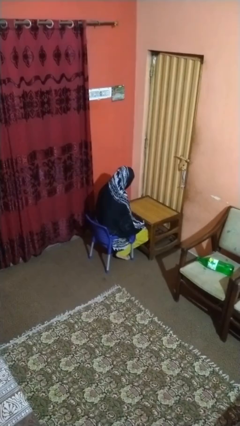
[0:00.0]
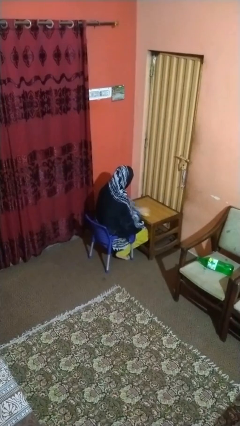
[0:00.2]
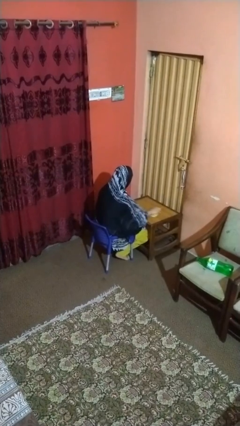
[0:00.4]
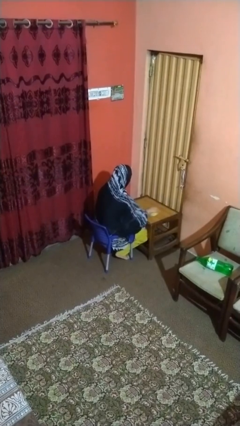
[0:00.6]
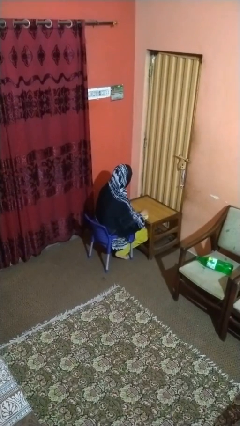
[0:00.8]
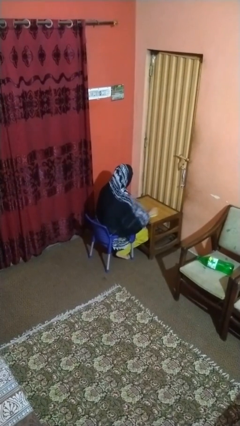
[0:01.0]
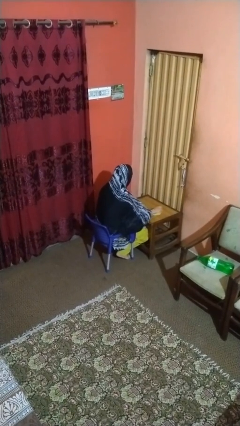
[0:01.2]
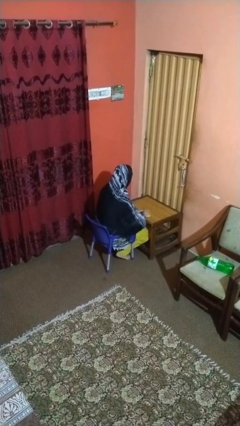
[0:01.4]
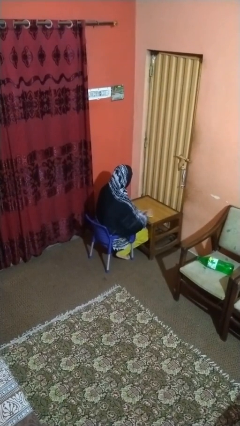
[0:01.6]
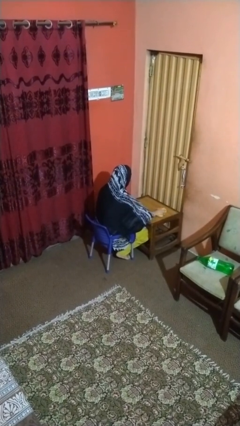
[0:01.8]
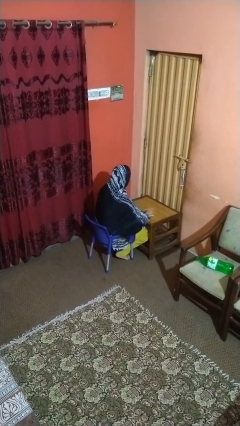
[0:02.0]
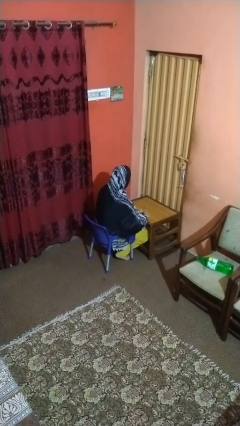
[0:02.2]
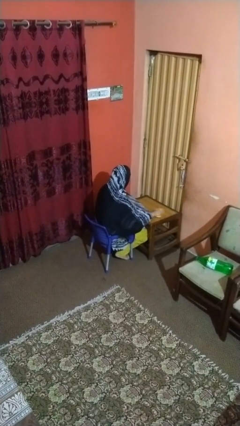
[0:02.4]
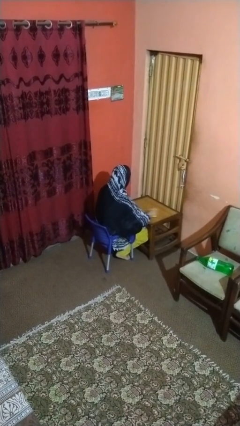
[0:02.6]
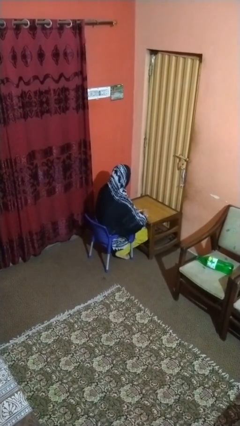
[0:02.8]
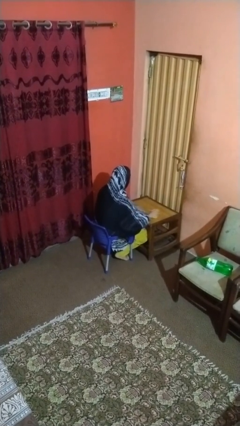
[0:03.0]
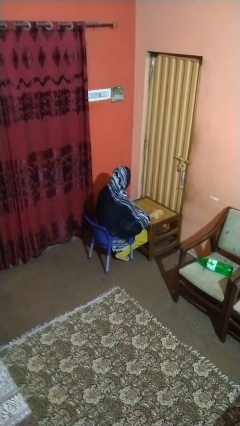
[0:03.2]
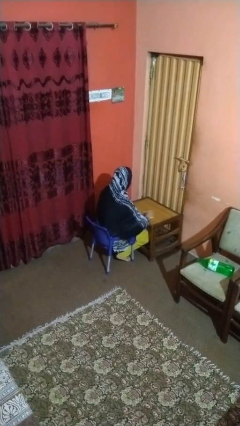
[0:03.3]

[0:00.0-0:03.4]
person cleans table with rag

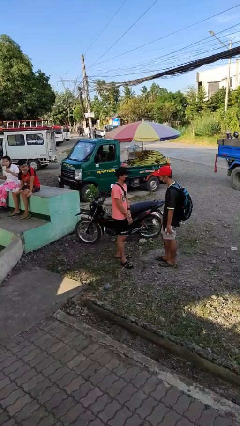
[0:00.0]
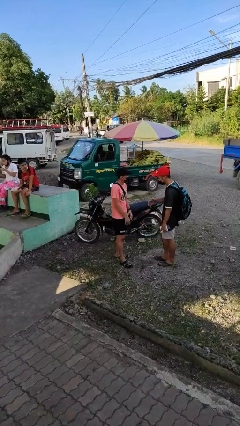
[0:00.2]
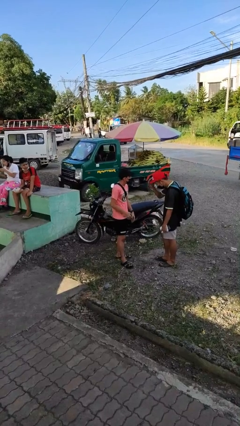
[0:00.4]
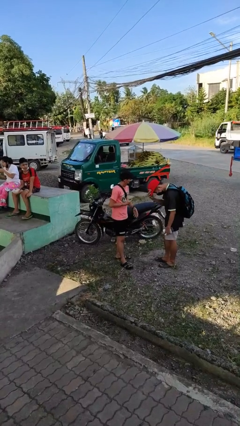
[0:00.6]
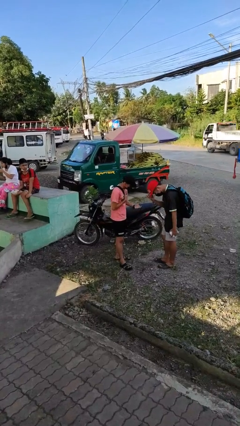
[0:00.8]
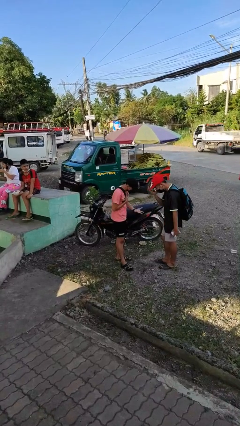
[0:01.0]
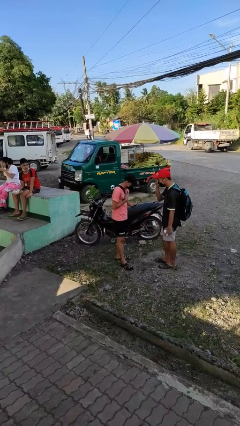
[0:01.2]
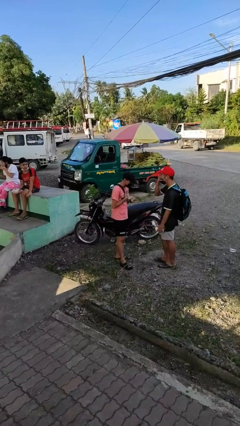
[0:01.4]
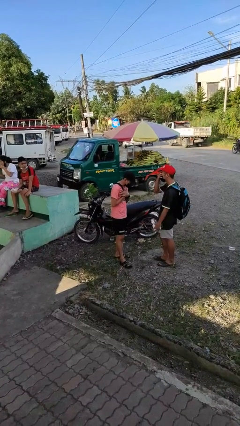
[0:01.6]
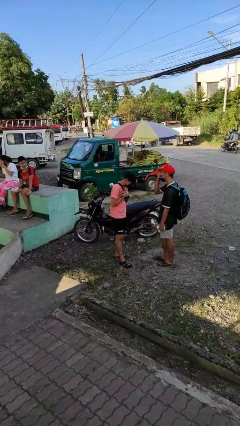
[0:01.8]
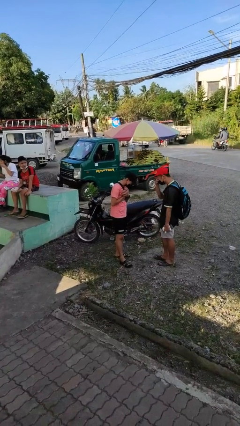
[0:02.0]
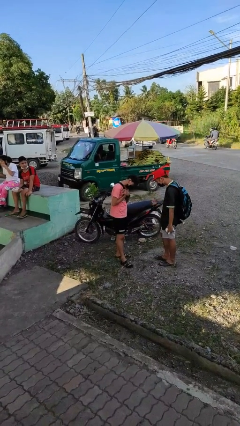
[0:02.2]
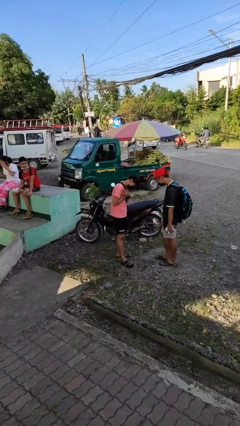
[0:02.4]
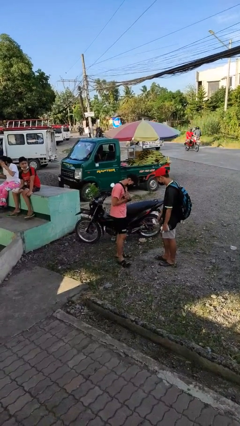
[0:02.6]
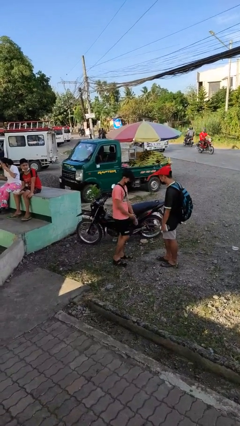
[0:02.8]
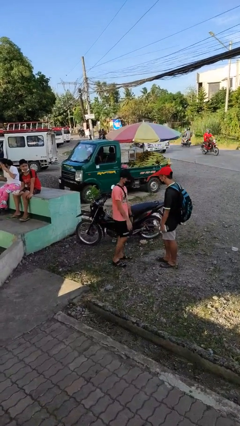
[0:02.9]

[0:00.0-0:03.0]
person laughs with person

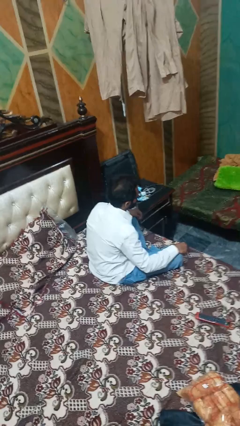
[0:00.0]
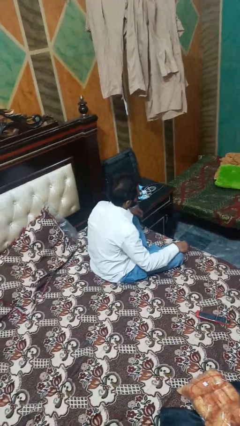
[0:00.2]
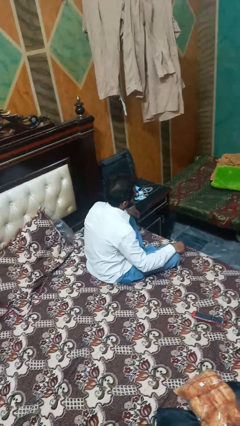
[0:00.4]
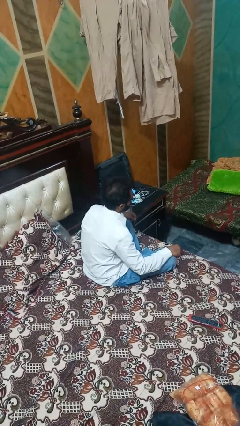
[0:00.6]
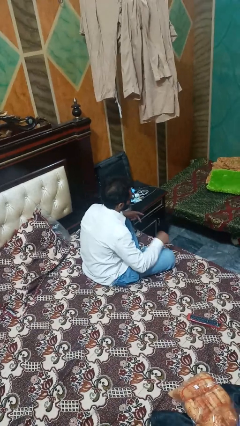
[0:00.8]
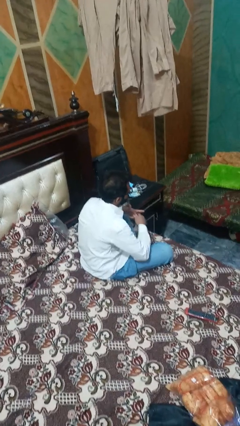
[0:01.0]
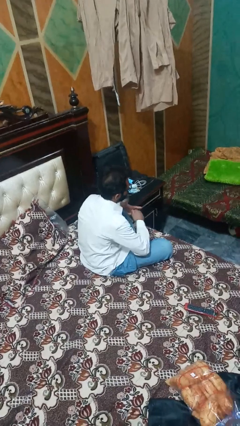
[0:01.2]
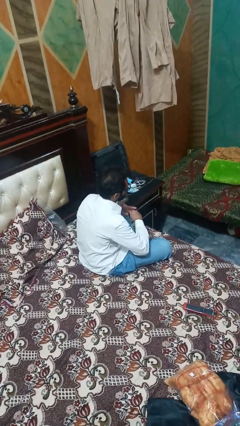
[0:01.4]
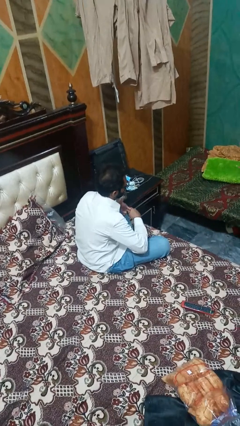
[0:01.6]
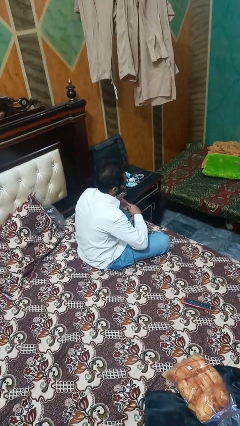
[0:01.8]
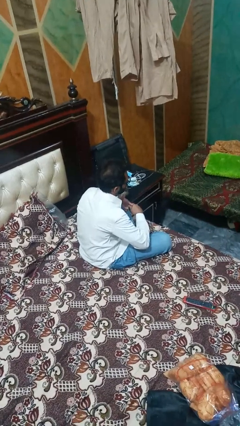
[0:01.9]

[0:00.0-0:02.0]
person snaps fingers

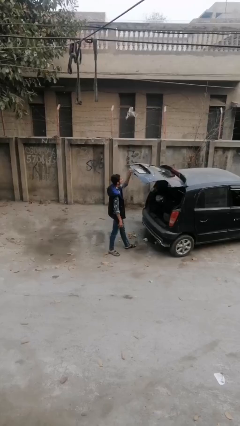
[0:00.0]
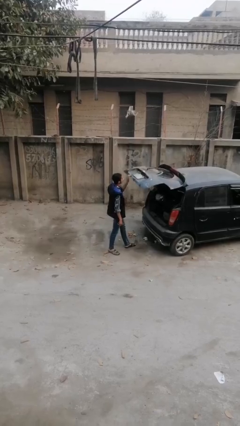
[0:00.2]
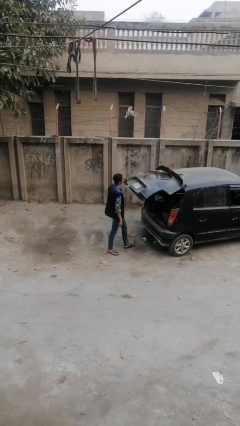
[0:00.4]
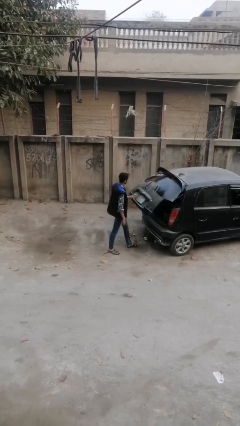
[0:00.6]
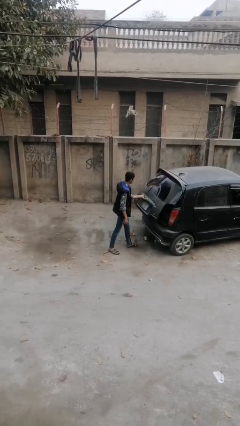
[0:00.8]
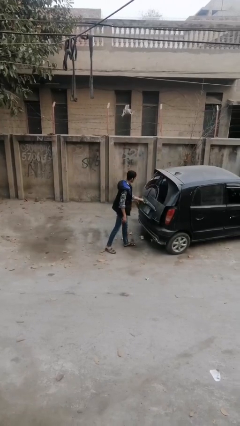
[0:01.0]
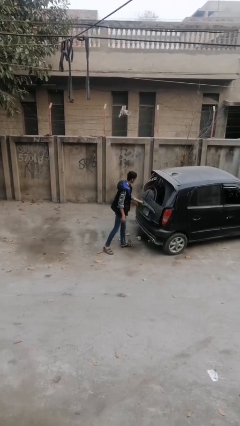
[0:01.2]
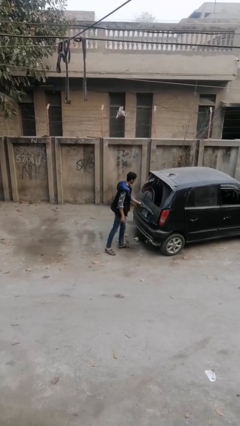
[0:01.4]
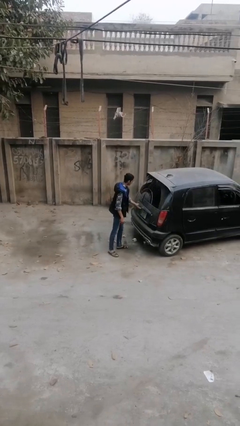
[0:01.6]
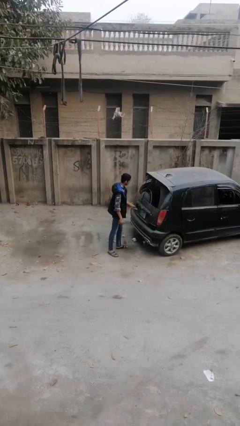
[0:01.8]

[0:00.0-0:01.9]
person closes car trunk

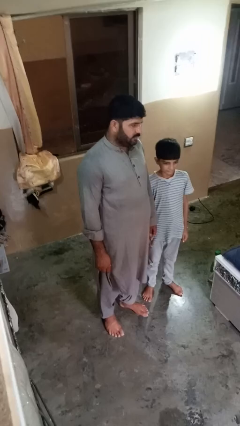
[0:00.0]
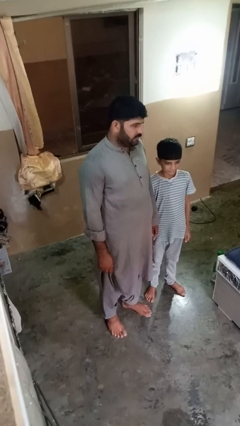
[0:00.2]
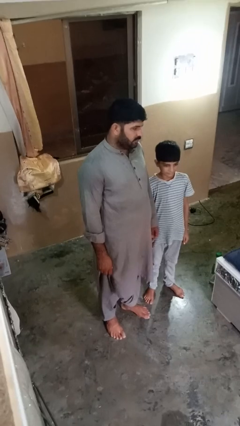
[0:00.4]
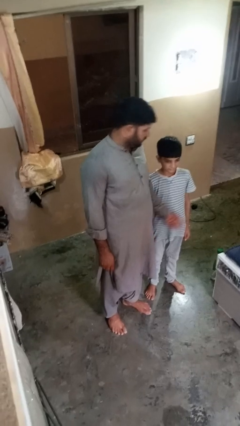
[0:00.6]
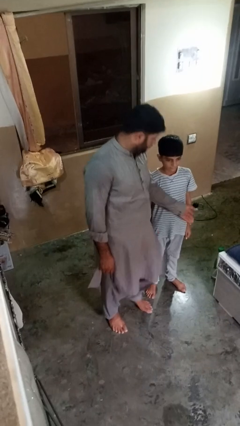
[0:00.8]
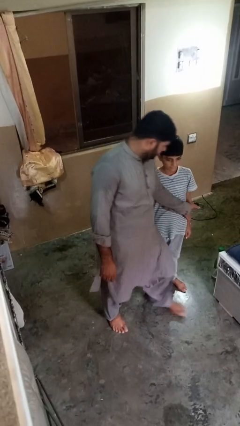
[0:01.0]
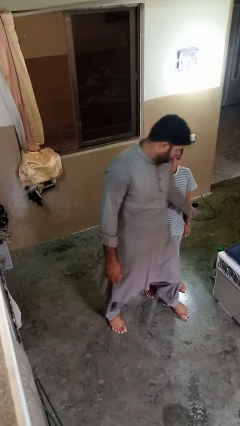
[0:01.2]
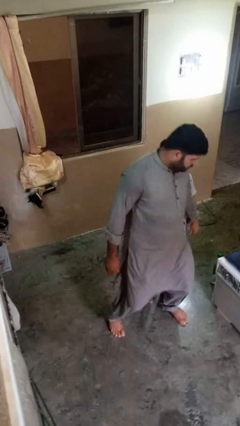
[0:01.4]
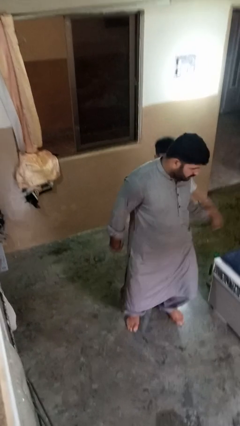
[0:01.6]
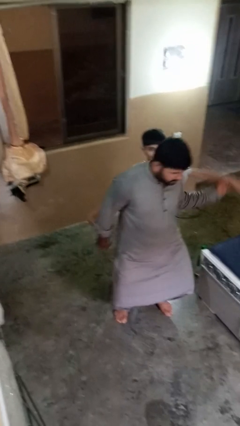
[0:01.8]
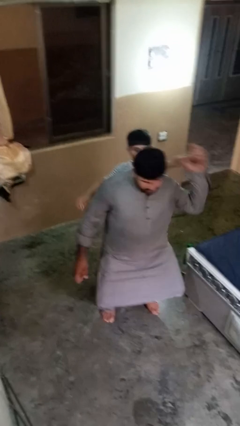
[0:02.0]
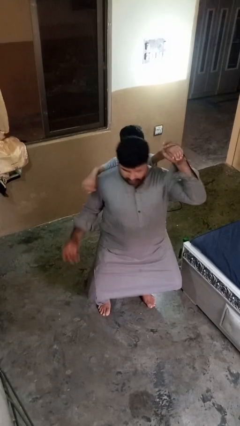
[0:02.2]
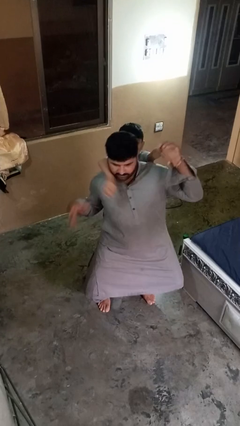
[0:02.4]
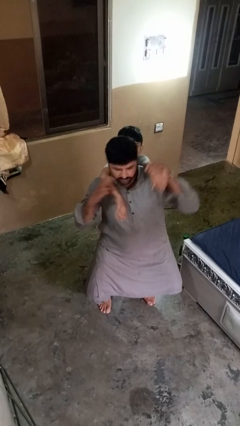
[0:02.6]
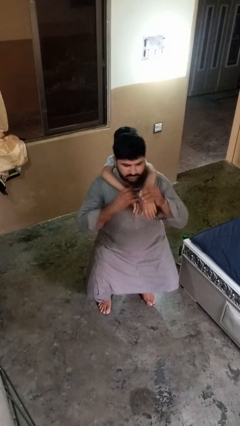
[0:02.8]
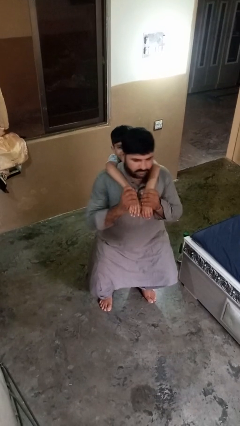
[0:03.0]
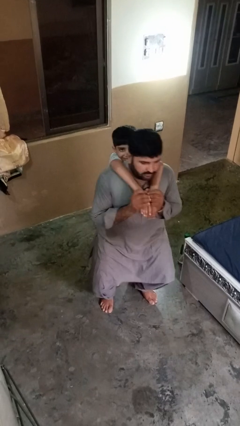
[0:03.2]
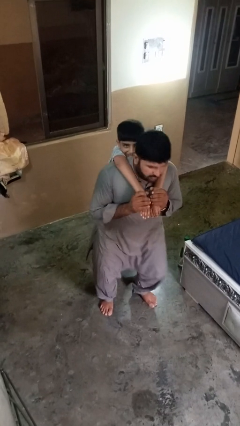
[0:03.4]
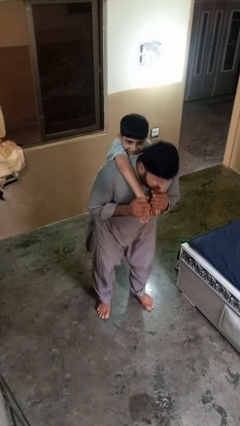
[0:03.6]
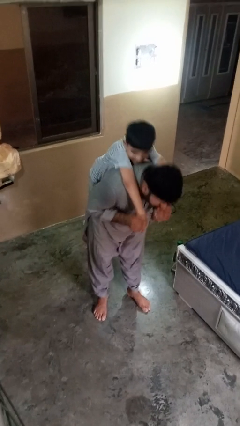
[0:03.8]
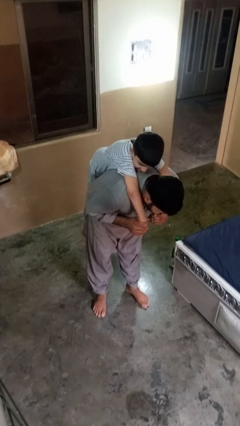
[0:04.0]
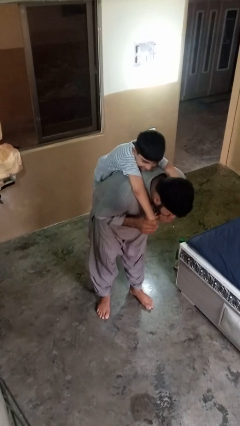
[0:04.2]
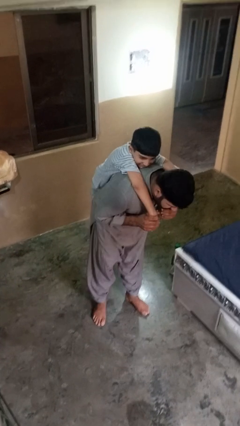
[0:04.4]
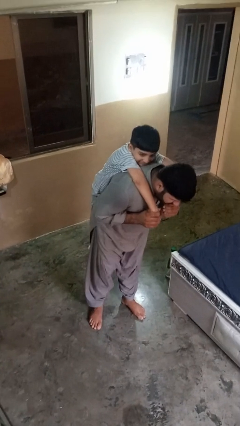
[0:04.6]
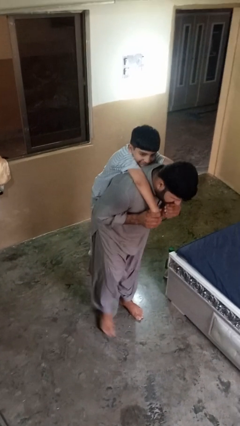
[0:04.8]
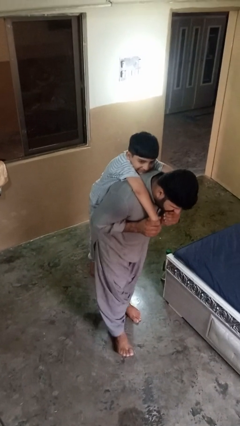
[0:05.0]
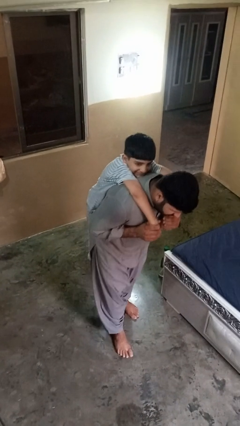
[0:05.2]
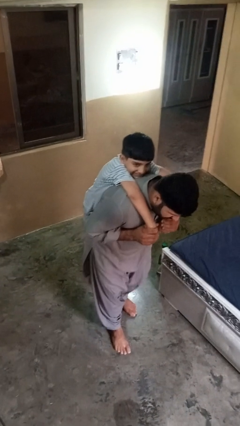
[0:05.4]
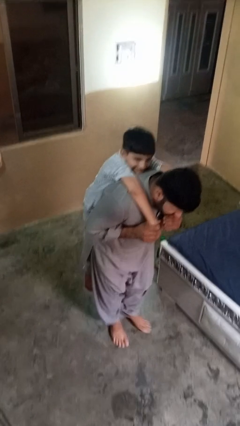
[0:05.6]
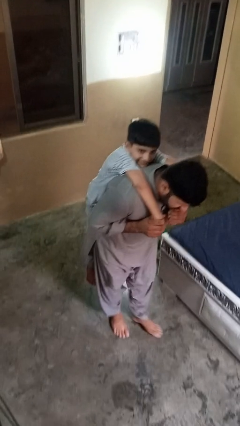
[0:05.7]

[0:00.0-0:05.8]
person carries person on back

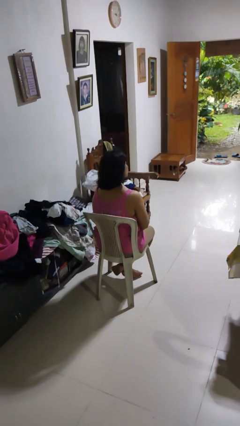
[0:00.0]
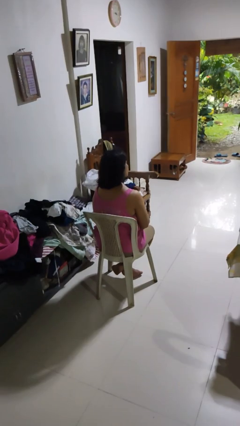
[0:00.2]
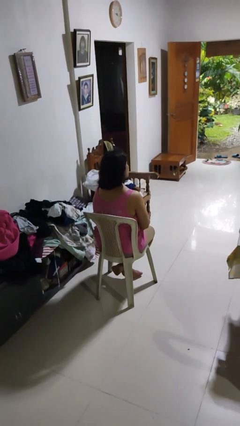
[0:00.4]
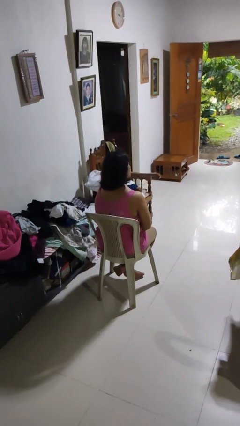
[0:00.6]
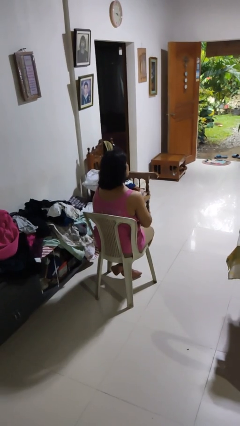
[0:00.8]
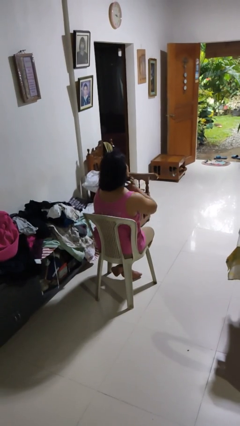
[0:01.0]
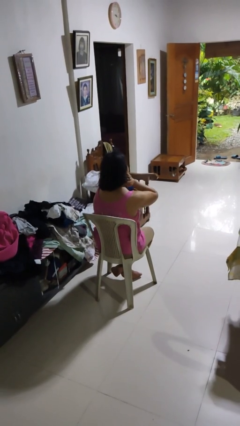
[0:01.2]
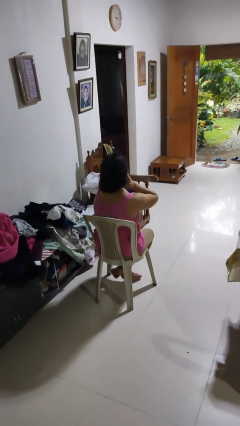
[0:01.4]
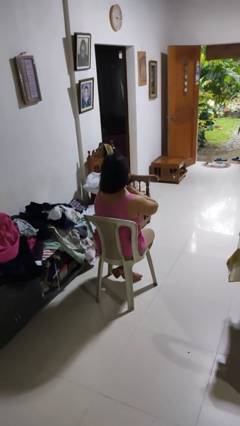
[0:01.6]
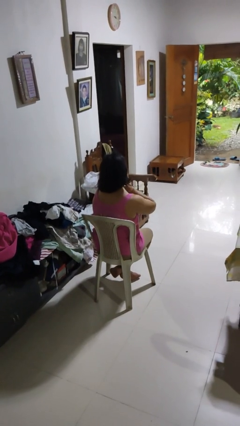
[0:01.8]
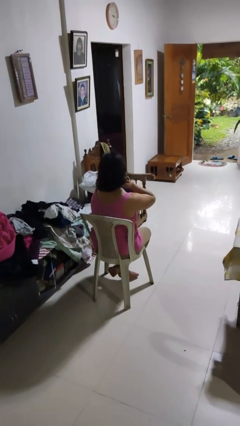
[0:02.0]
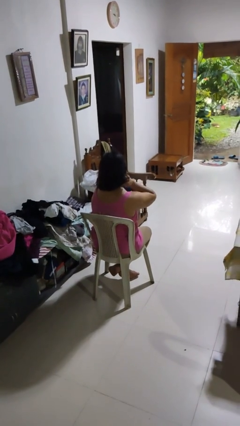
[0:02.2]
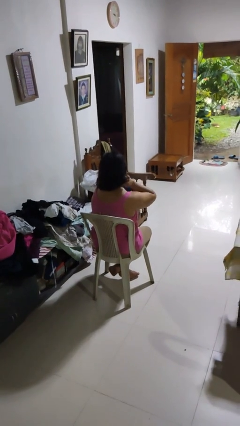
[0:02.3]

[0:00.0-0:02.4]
person rubs neck
